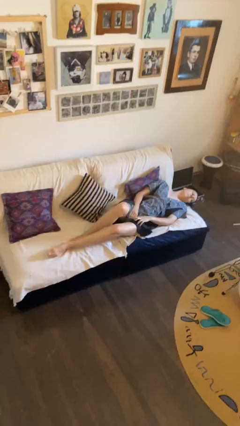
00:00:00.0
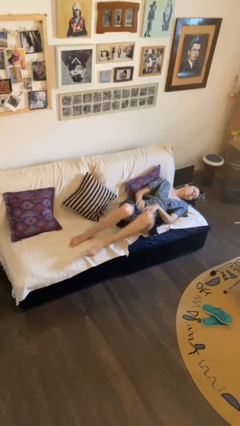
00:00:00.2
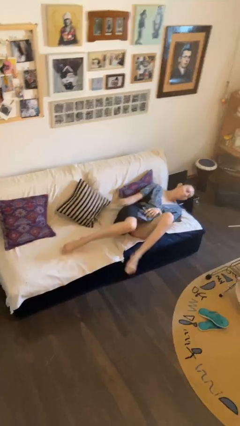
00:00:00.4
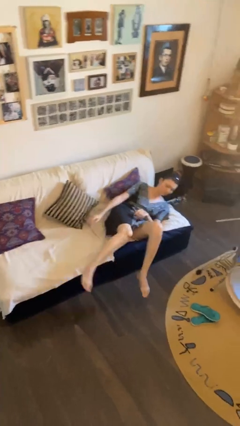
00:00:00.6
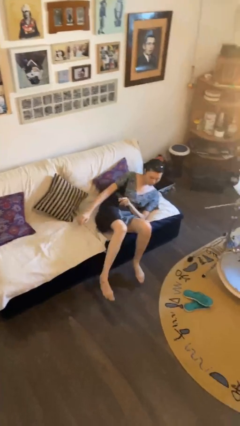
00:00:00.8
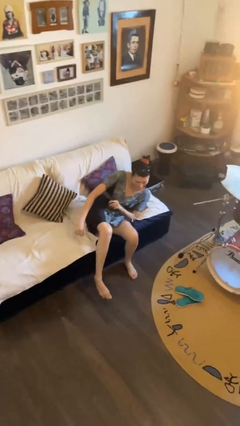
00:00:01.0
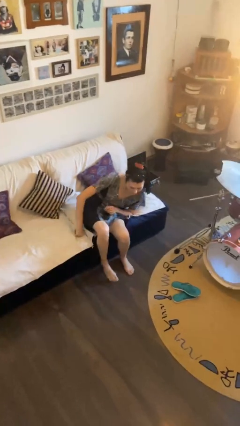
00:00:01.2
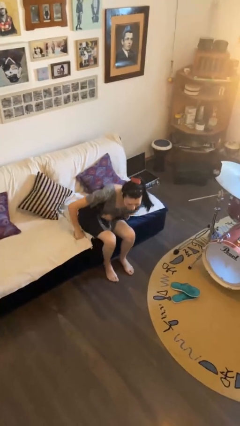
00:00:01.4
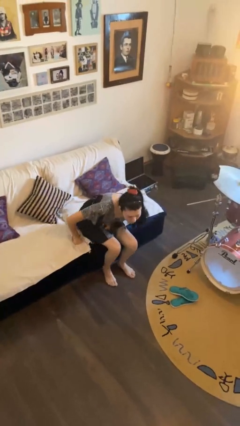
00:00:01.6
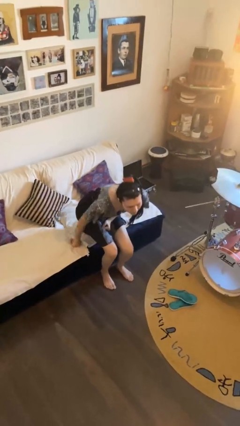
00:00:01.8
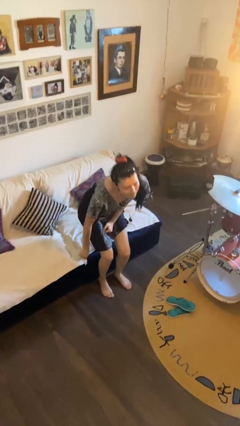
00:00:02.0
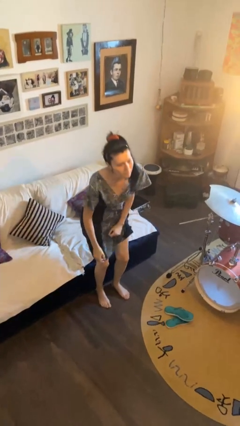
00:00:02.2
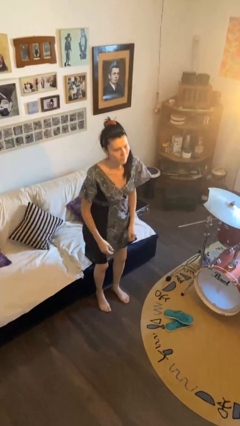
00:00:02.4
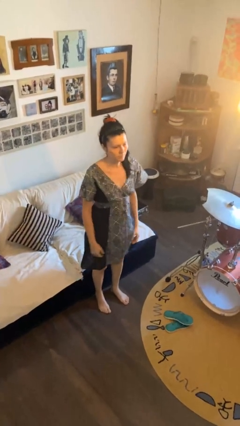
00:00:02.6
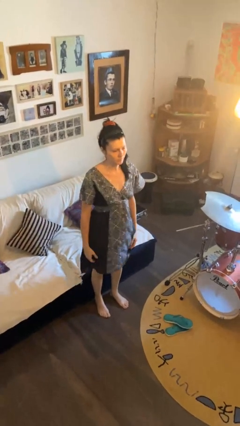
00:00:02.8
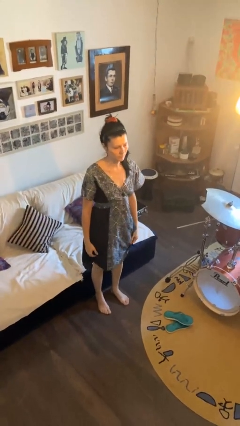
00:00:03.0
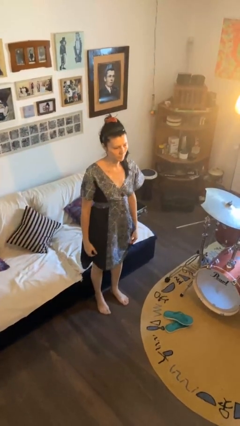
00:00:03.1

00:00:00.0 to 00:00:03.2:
person stands up

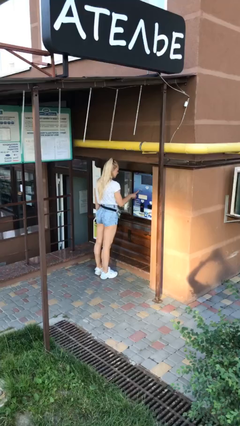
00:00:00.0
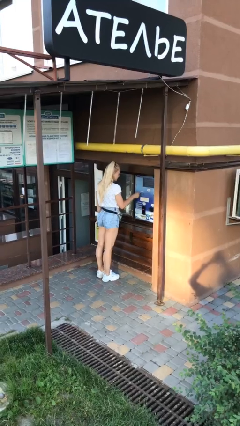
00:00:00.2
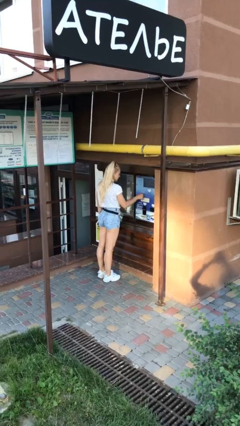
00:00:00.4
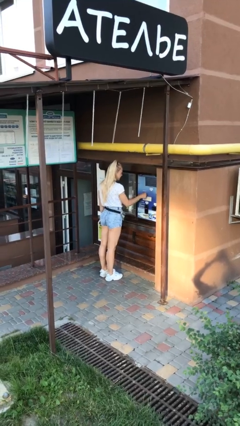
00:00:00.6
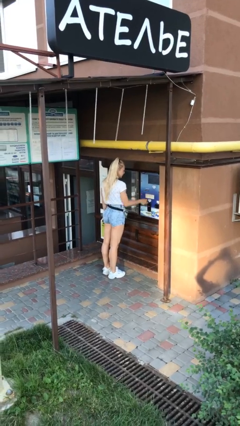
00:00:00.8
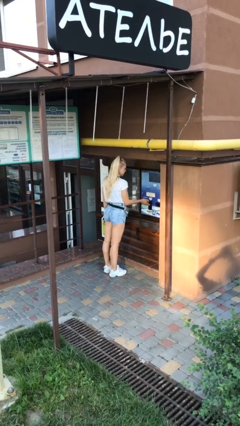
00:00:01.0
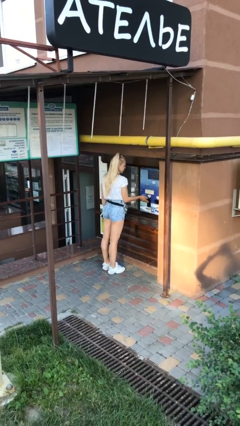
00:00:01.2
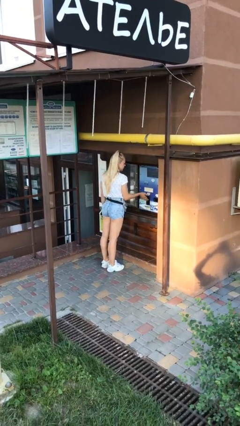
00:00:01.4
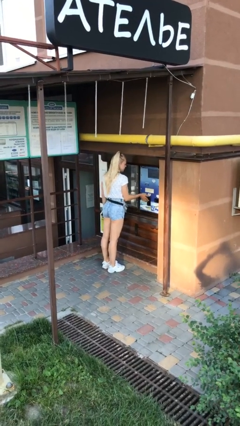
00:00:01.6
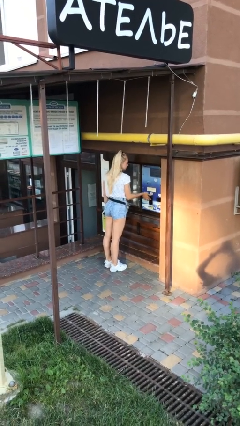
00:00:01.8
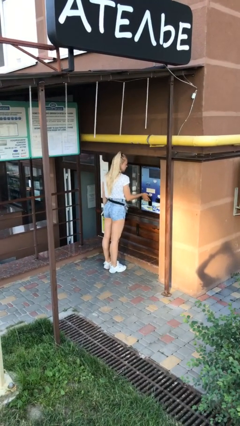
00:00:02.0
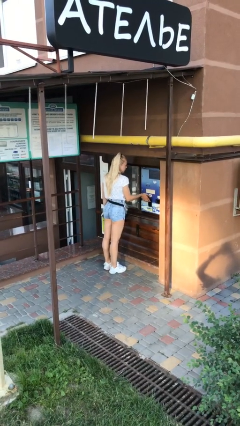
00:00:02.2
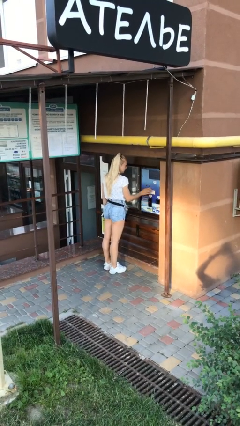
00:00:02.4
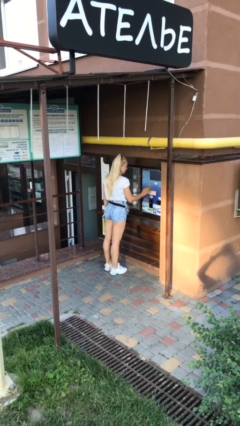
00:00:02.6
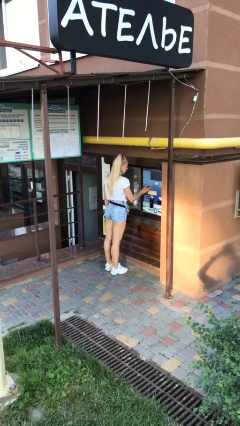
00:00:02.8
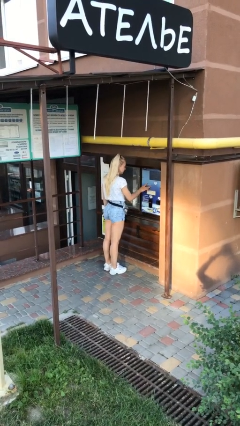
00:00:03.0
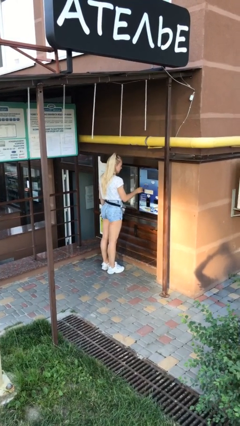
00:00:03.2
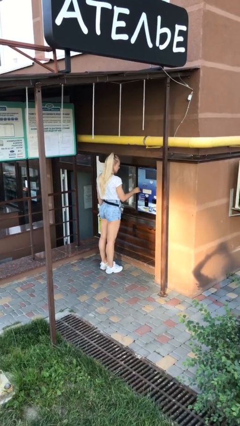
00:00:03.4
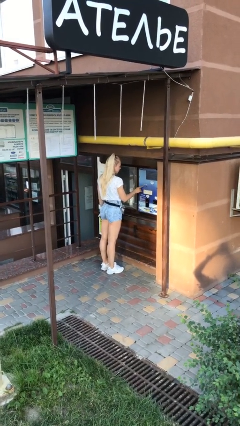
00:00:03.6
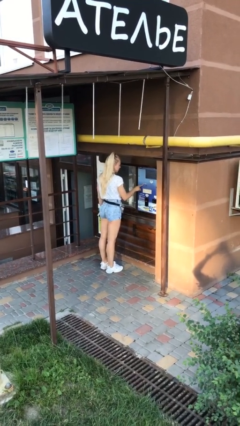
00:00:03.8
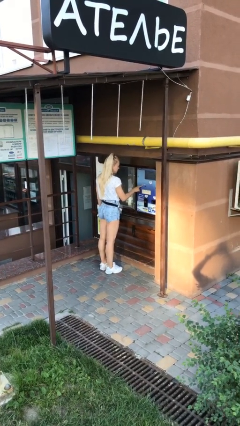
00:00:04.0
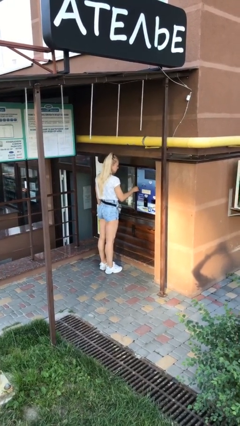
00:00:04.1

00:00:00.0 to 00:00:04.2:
person purchases from machine

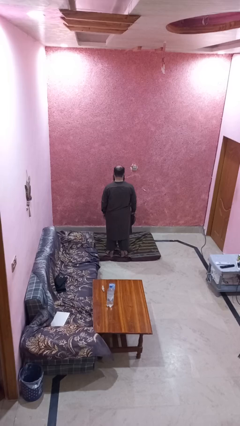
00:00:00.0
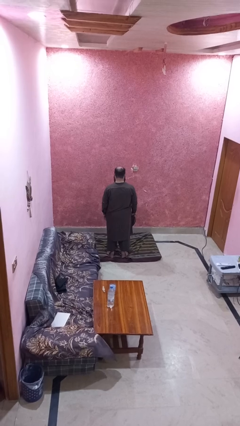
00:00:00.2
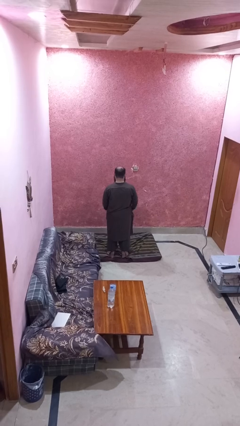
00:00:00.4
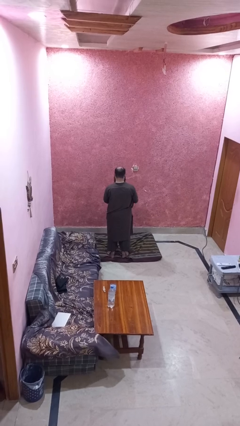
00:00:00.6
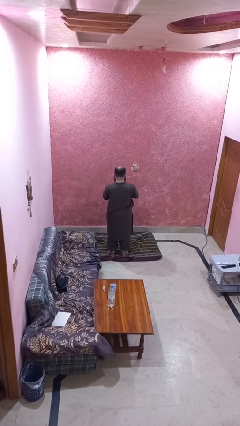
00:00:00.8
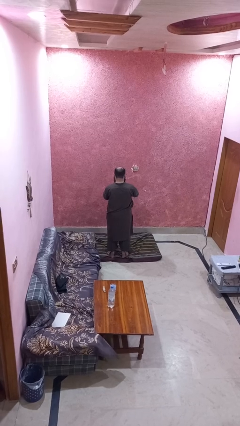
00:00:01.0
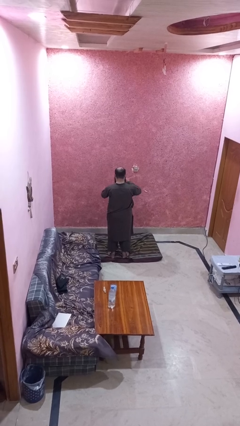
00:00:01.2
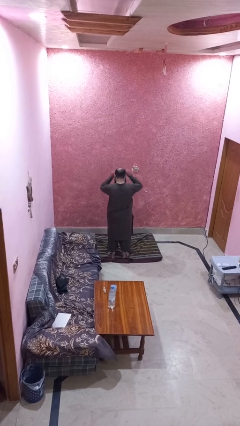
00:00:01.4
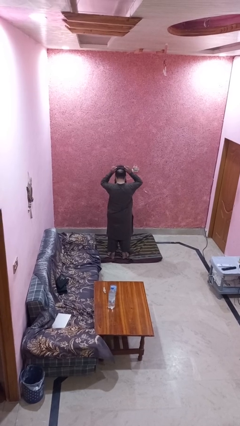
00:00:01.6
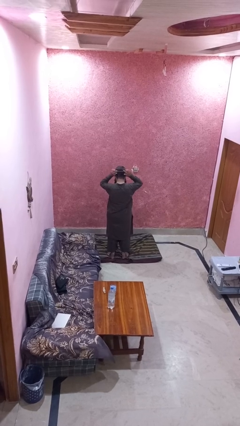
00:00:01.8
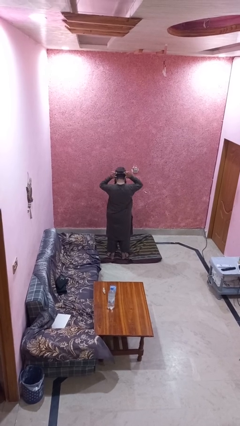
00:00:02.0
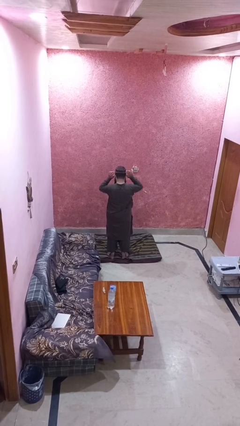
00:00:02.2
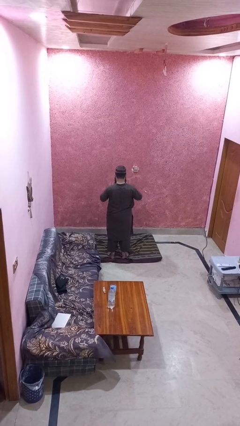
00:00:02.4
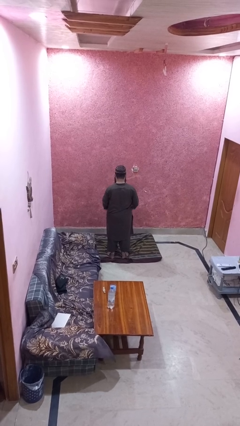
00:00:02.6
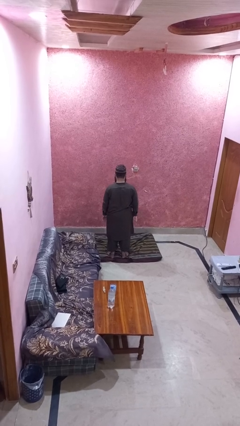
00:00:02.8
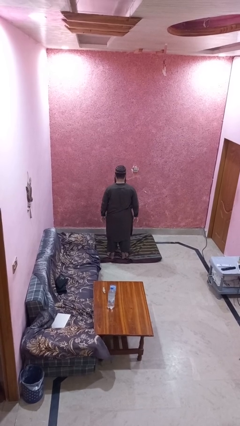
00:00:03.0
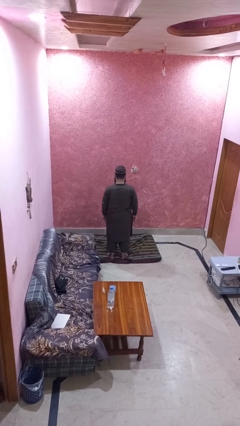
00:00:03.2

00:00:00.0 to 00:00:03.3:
person puts on hat

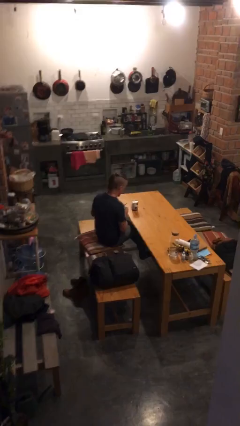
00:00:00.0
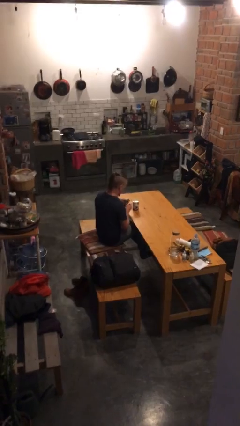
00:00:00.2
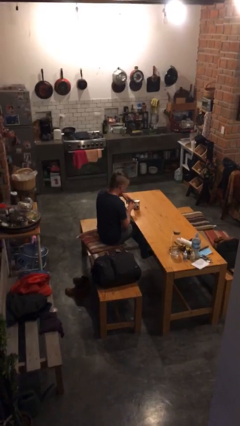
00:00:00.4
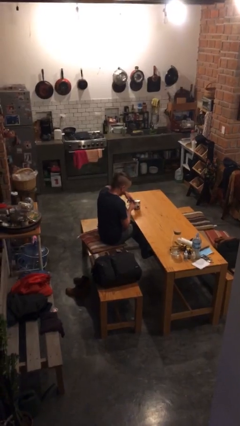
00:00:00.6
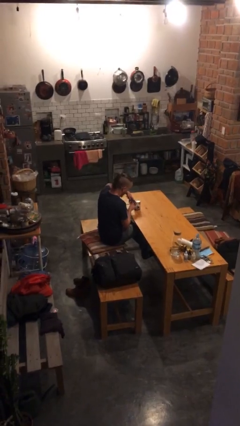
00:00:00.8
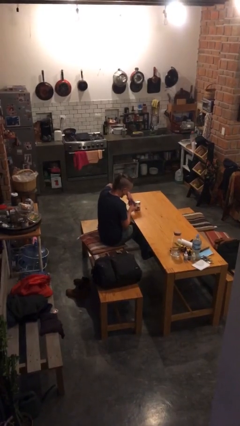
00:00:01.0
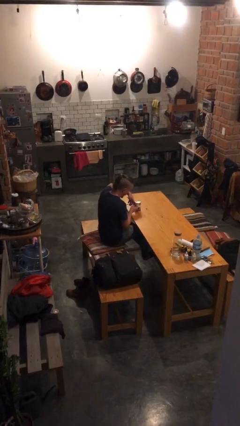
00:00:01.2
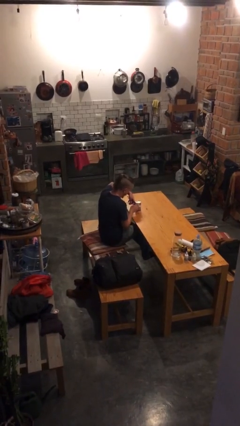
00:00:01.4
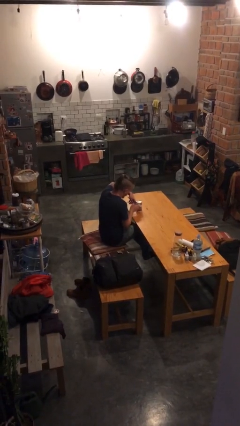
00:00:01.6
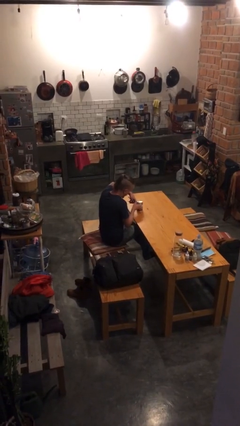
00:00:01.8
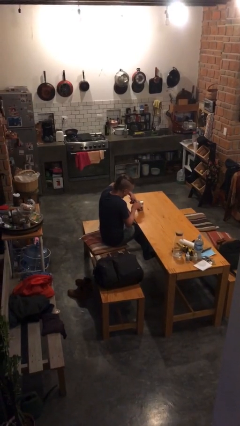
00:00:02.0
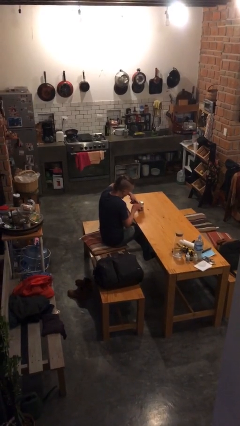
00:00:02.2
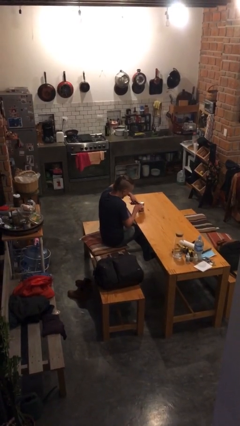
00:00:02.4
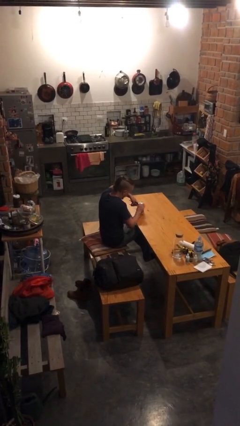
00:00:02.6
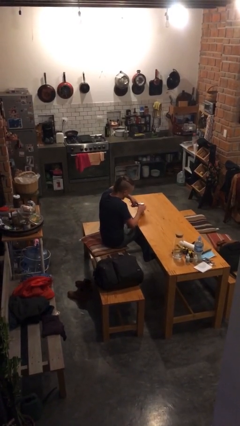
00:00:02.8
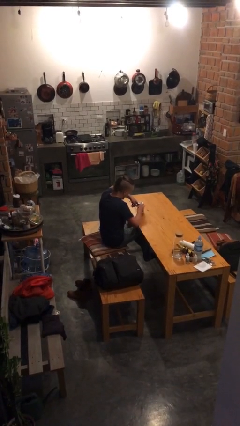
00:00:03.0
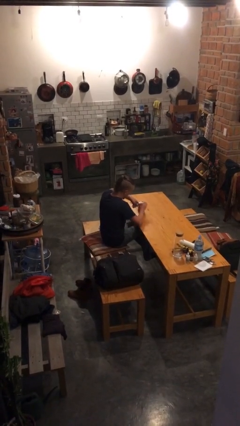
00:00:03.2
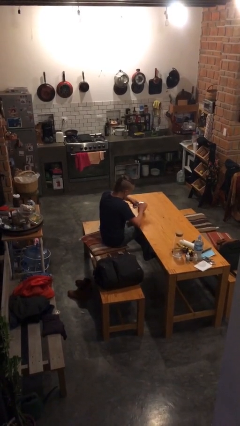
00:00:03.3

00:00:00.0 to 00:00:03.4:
person opens can with can opener

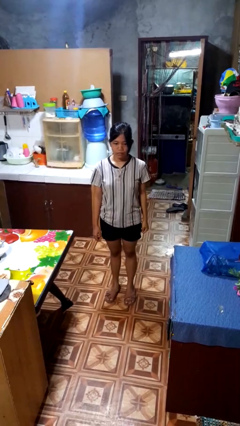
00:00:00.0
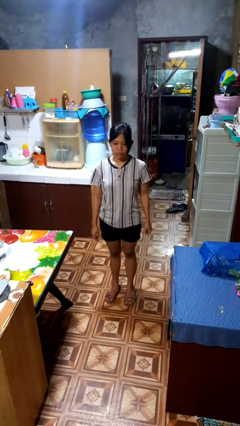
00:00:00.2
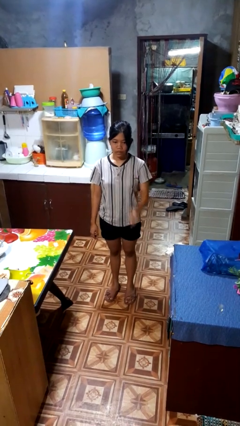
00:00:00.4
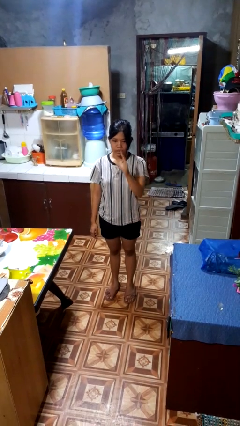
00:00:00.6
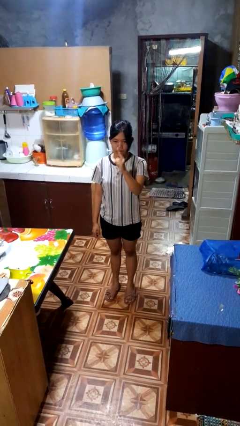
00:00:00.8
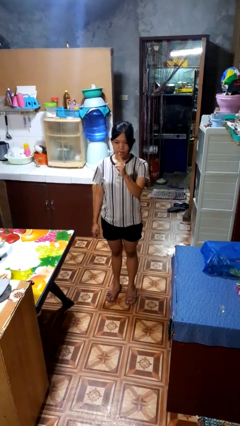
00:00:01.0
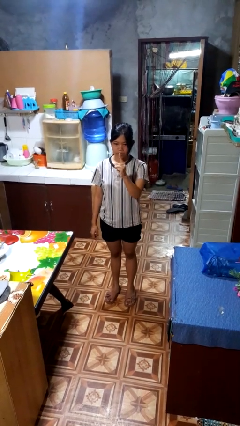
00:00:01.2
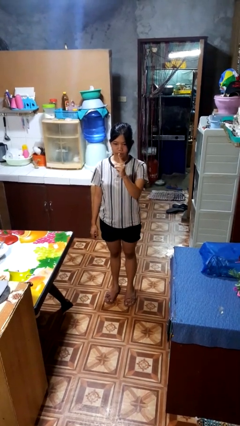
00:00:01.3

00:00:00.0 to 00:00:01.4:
person gestures number one

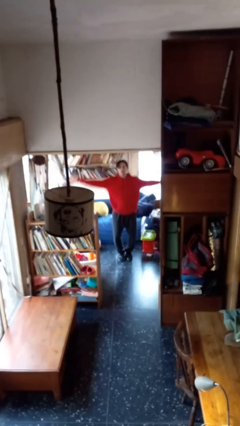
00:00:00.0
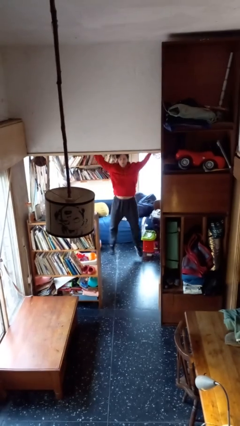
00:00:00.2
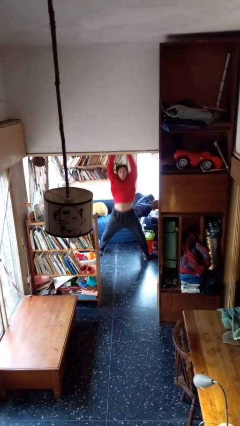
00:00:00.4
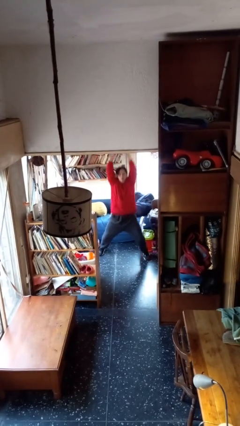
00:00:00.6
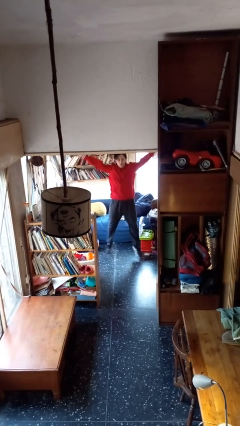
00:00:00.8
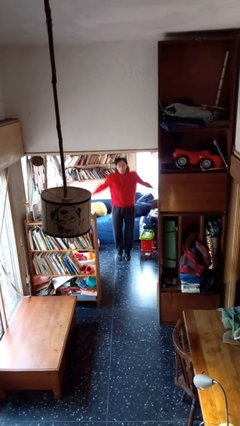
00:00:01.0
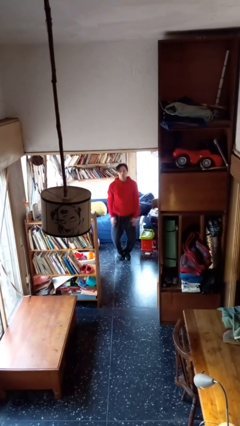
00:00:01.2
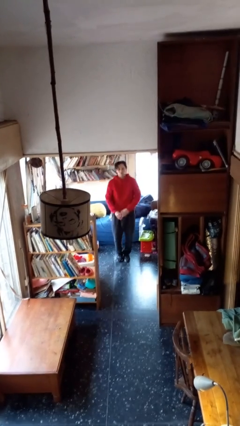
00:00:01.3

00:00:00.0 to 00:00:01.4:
person exercises with jumping jacks

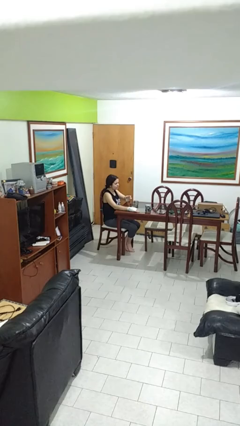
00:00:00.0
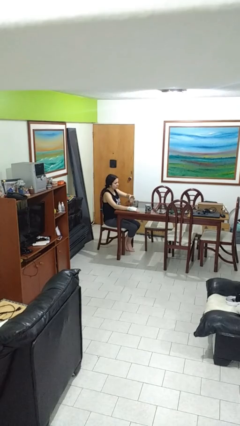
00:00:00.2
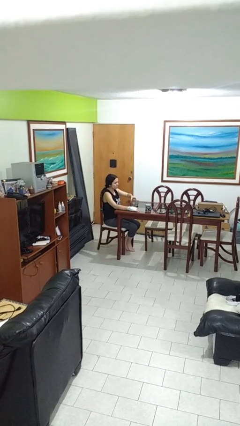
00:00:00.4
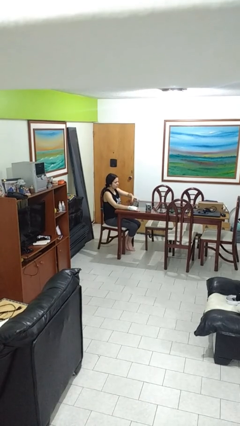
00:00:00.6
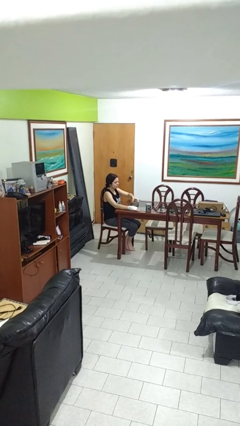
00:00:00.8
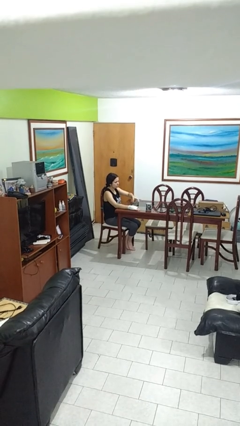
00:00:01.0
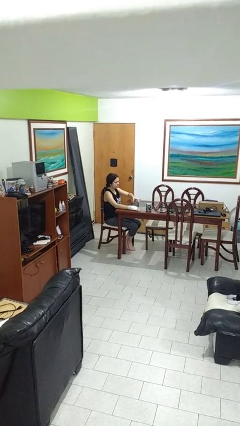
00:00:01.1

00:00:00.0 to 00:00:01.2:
person puts down object on table
